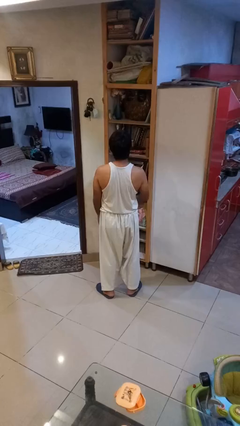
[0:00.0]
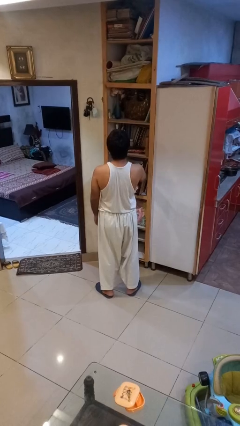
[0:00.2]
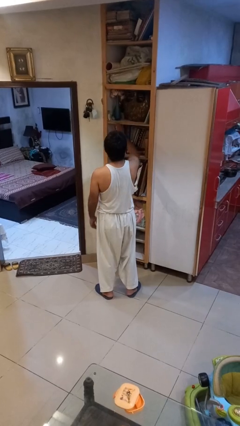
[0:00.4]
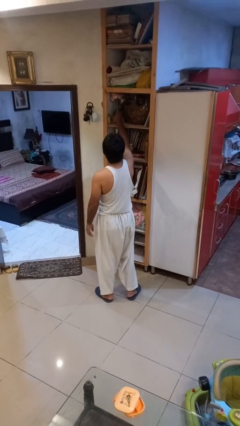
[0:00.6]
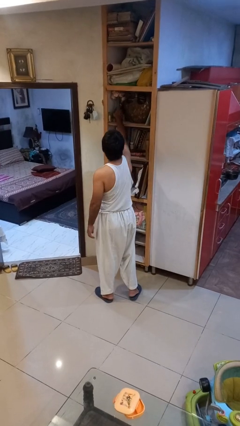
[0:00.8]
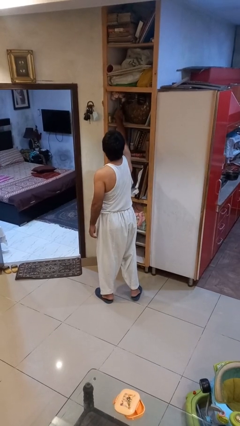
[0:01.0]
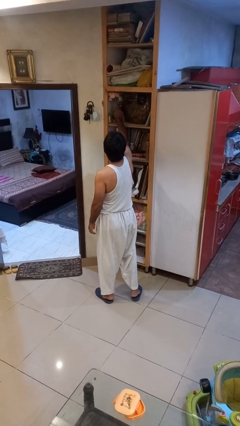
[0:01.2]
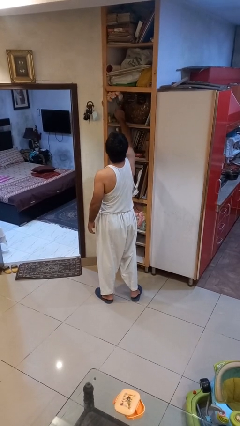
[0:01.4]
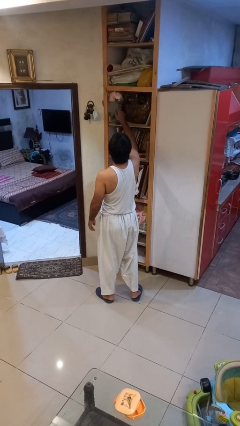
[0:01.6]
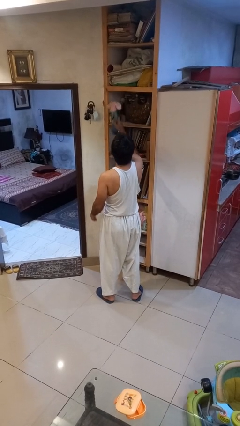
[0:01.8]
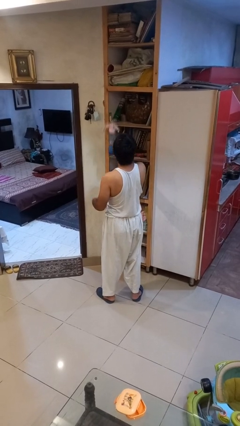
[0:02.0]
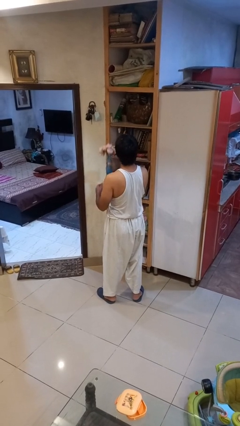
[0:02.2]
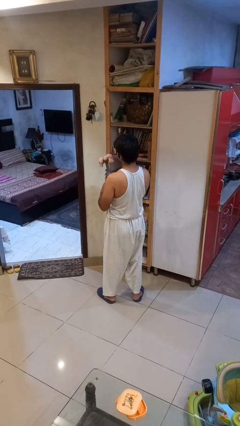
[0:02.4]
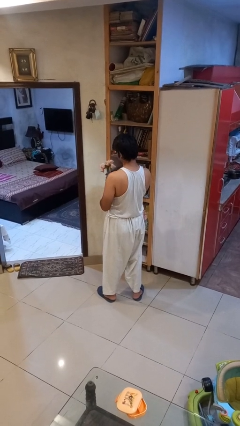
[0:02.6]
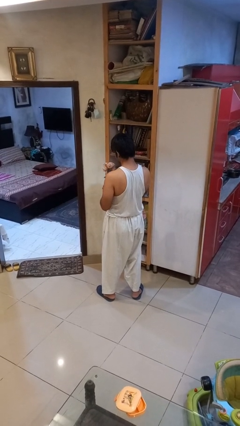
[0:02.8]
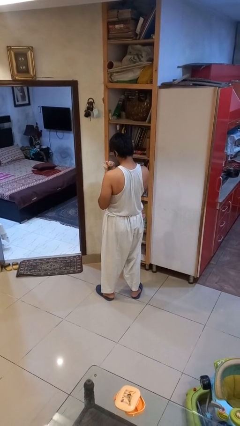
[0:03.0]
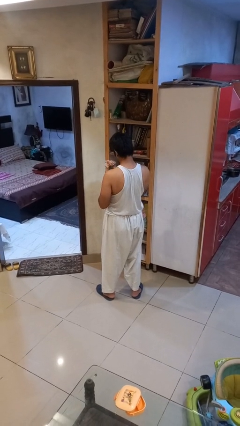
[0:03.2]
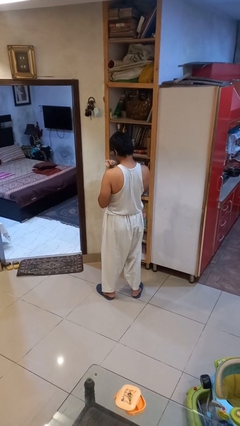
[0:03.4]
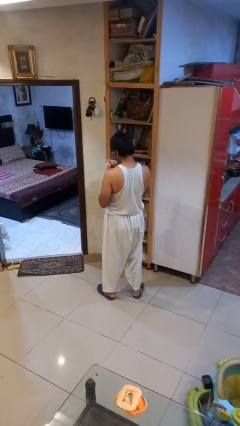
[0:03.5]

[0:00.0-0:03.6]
person picks up object from shelf

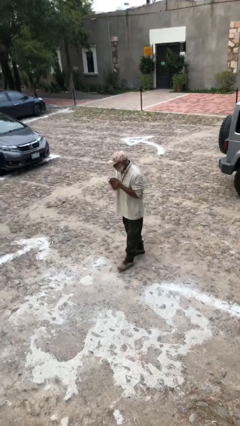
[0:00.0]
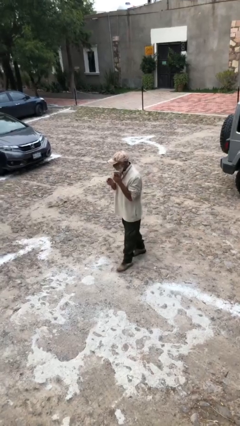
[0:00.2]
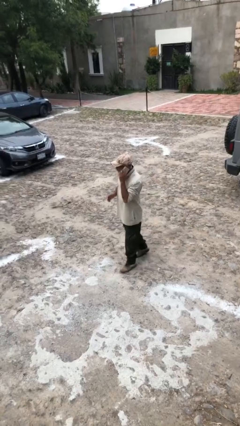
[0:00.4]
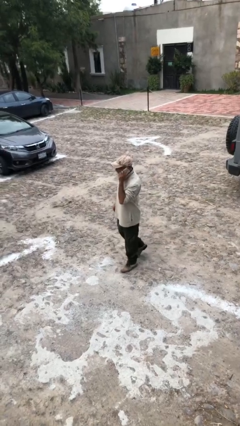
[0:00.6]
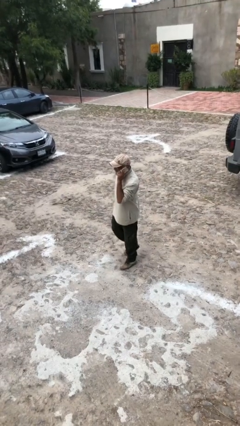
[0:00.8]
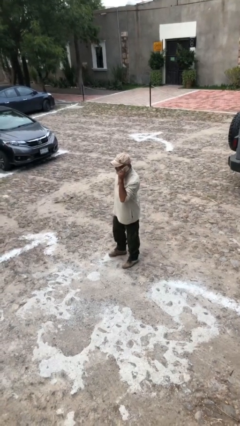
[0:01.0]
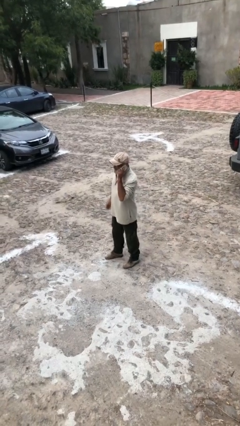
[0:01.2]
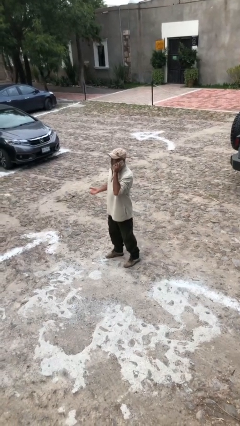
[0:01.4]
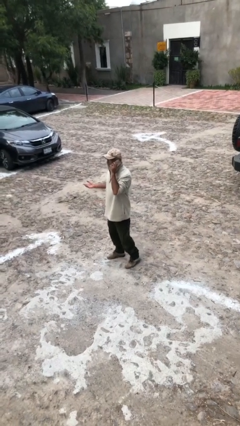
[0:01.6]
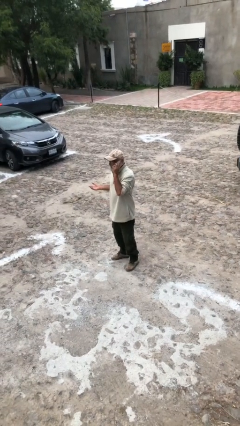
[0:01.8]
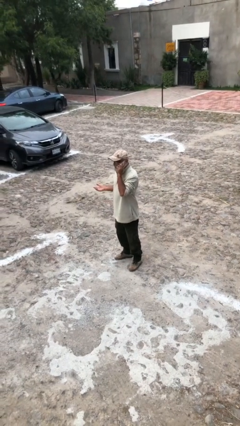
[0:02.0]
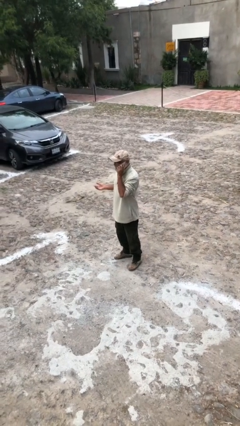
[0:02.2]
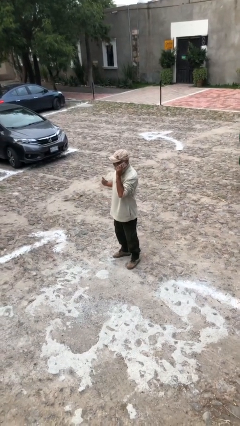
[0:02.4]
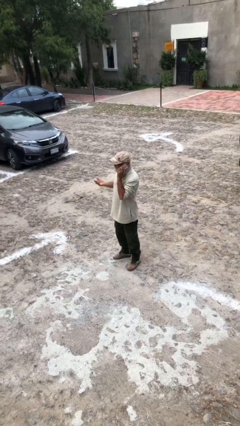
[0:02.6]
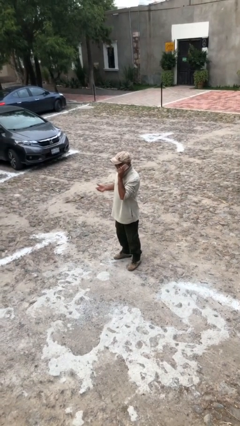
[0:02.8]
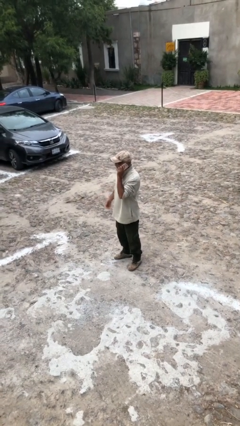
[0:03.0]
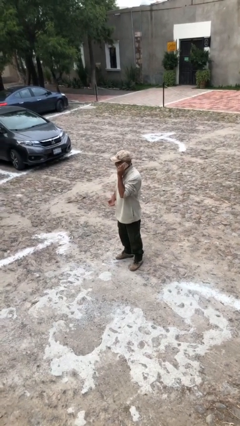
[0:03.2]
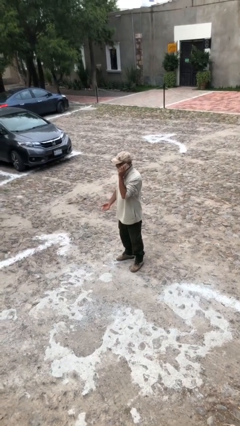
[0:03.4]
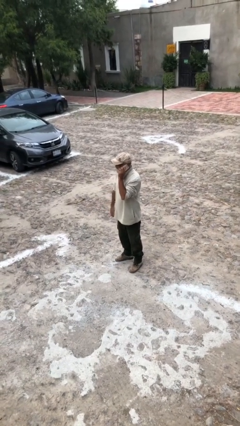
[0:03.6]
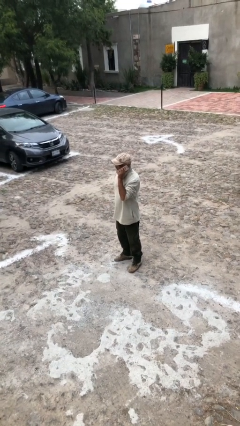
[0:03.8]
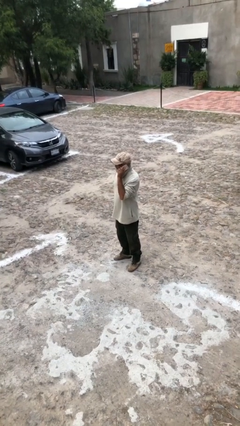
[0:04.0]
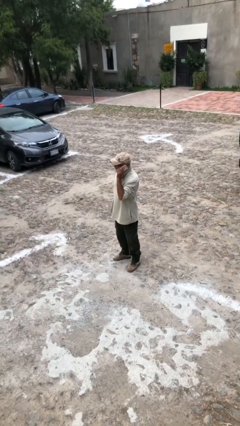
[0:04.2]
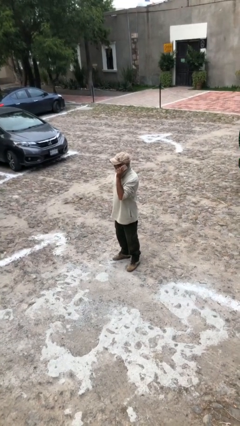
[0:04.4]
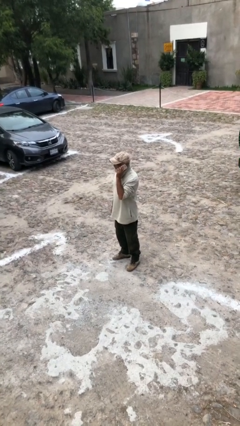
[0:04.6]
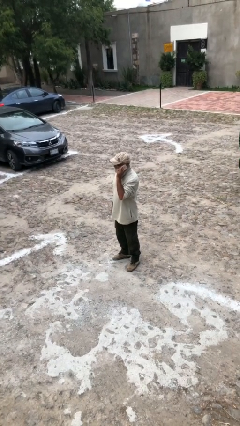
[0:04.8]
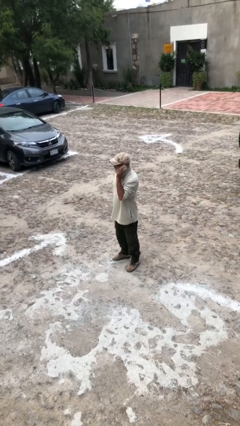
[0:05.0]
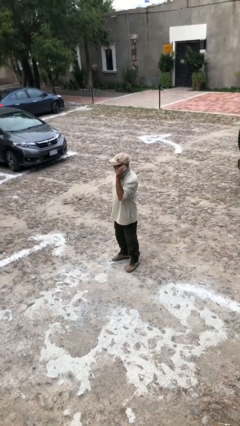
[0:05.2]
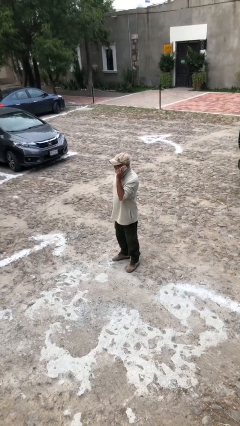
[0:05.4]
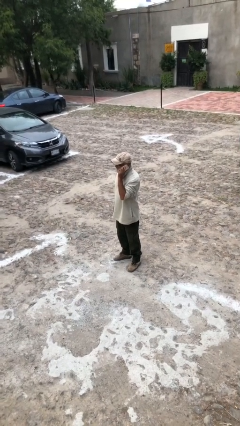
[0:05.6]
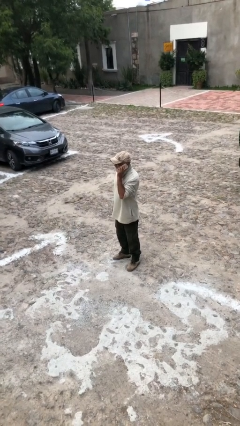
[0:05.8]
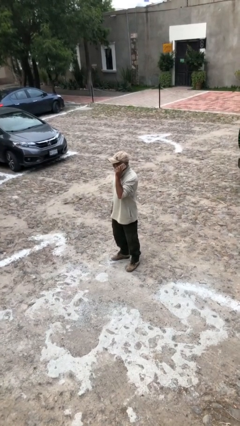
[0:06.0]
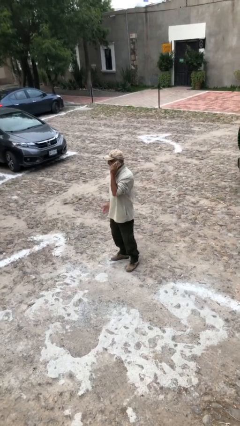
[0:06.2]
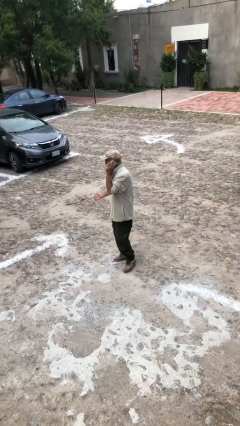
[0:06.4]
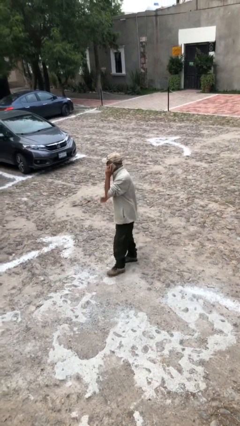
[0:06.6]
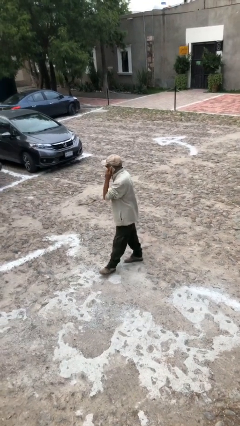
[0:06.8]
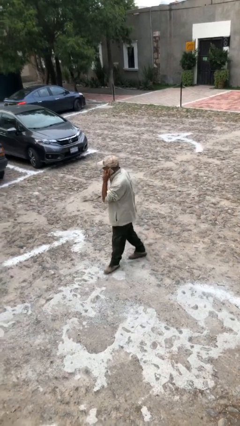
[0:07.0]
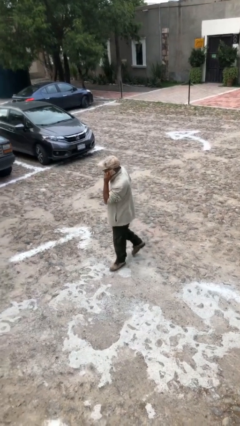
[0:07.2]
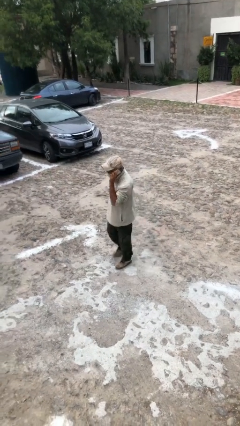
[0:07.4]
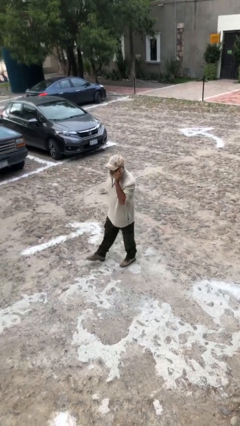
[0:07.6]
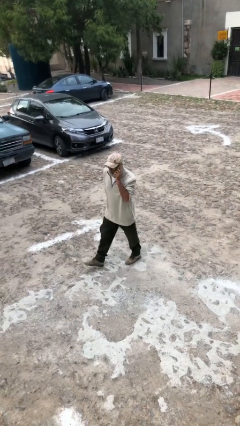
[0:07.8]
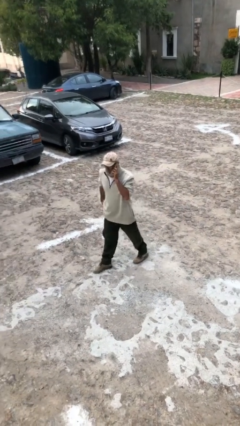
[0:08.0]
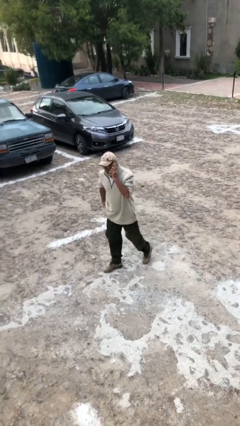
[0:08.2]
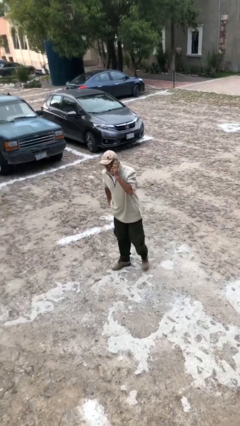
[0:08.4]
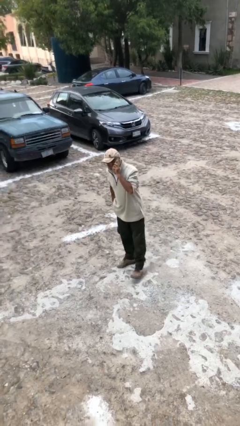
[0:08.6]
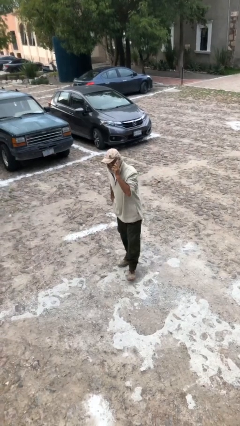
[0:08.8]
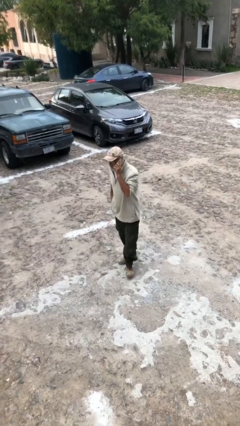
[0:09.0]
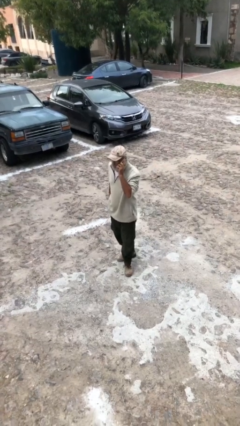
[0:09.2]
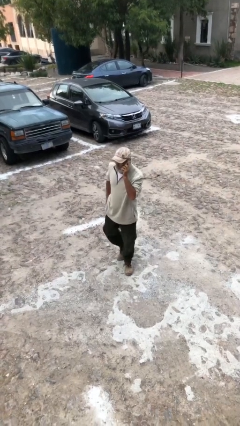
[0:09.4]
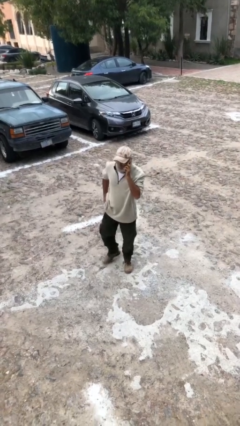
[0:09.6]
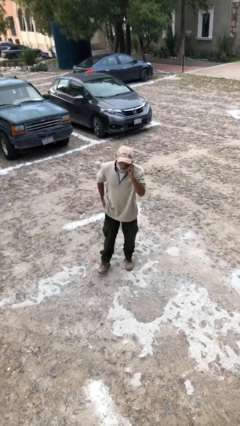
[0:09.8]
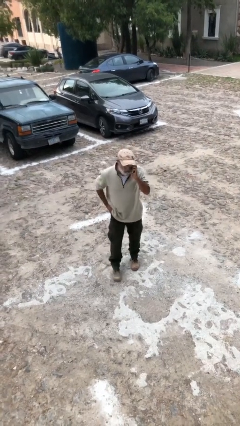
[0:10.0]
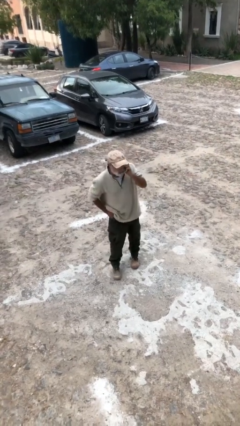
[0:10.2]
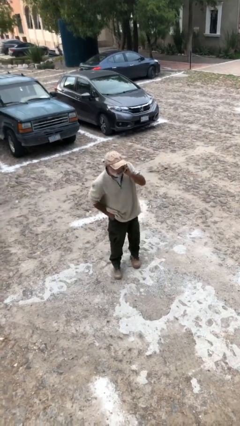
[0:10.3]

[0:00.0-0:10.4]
person talks on phone

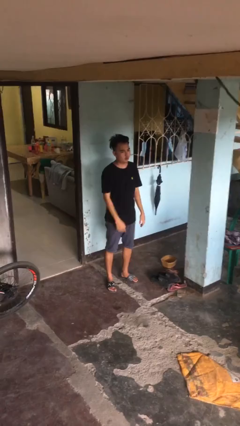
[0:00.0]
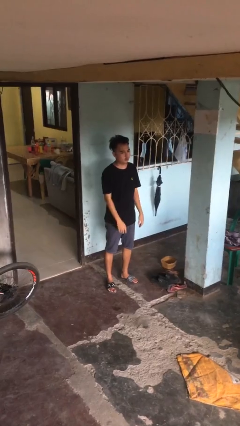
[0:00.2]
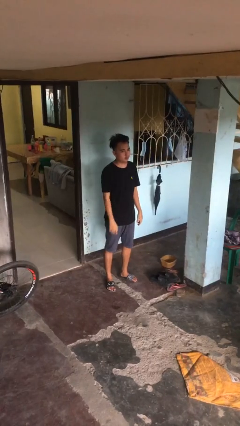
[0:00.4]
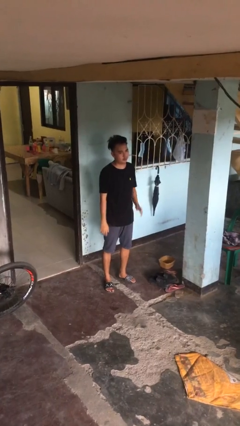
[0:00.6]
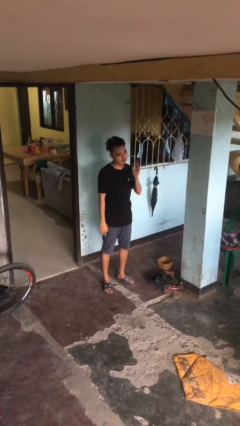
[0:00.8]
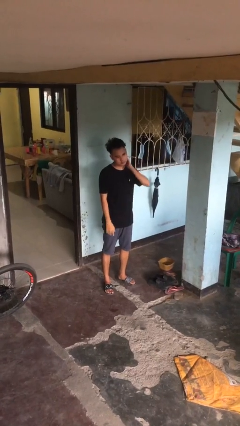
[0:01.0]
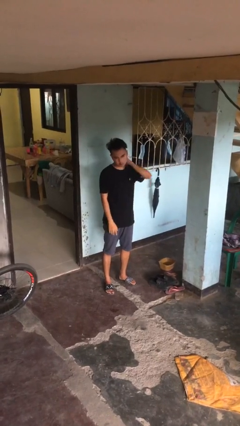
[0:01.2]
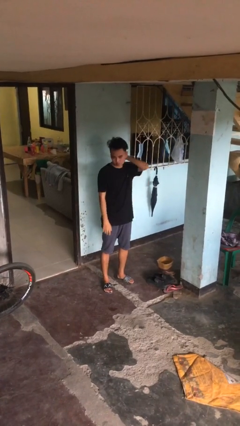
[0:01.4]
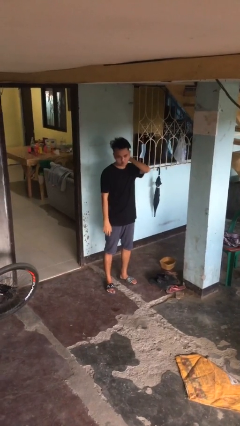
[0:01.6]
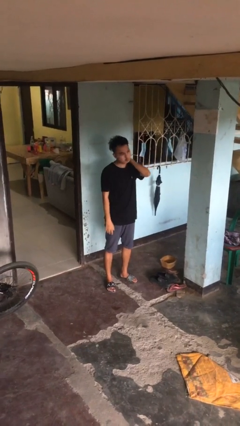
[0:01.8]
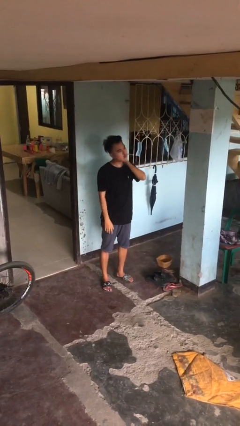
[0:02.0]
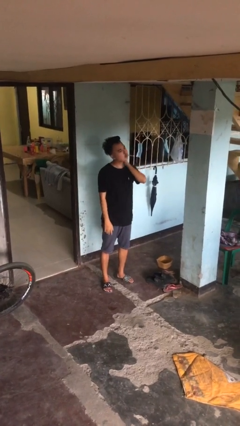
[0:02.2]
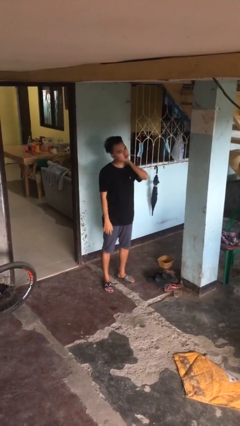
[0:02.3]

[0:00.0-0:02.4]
person rubs neck

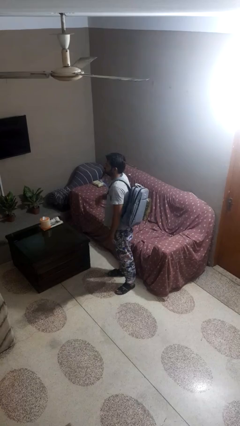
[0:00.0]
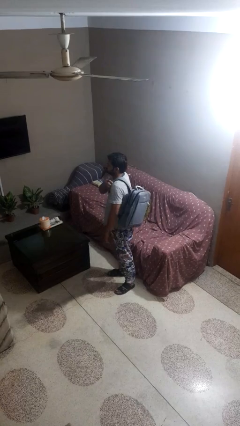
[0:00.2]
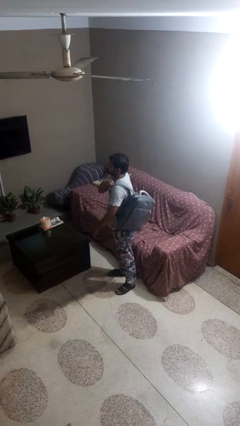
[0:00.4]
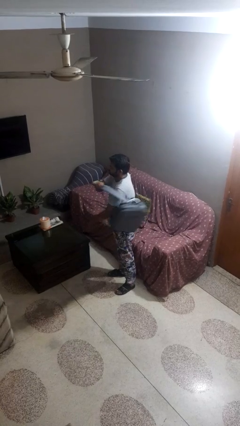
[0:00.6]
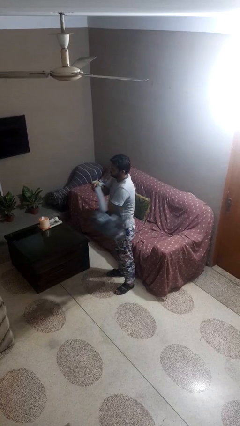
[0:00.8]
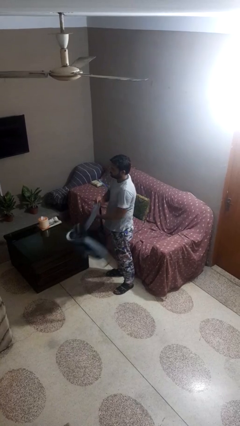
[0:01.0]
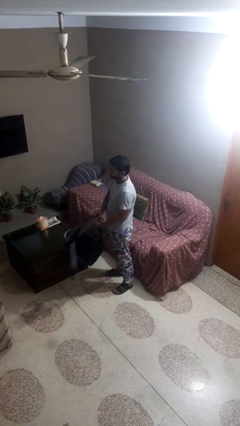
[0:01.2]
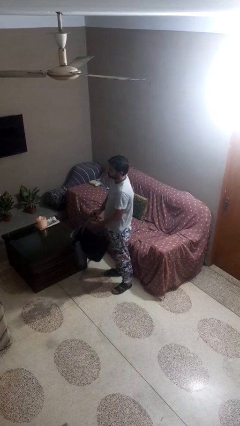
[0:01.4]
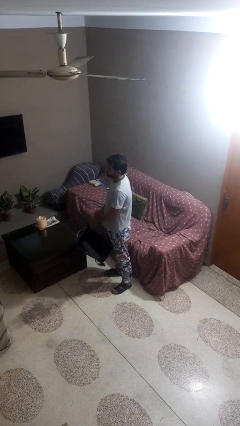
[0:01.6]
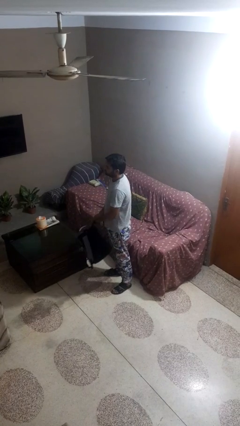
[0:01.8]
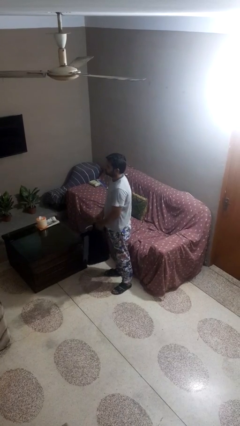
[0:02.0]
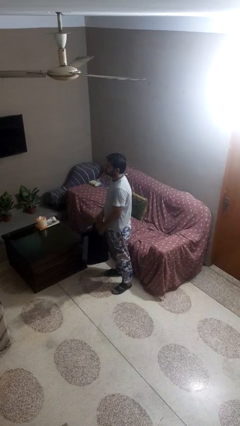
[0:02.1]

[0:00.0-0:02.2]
person takes off backpack
